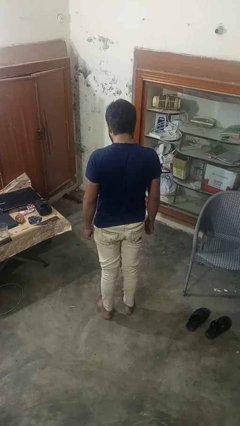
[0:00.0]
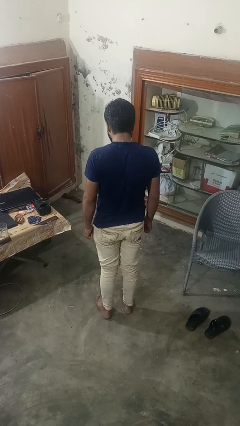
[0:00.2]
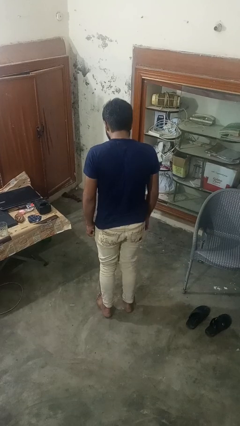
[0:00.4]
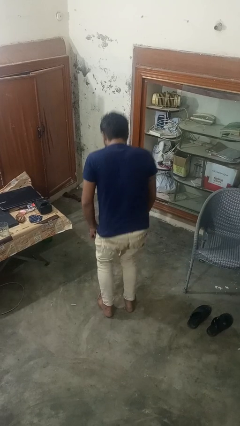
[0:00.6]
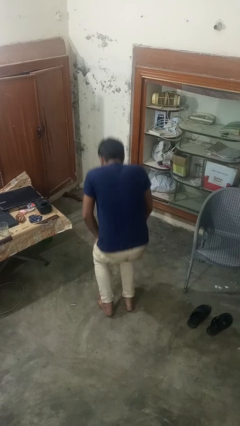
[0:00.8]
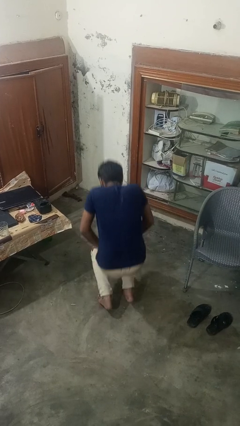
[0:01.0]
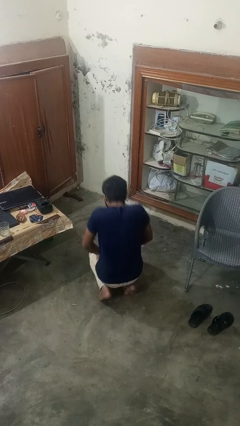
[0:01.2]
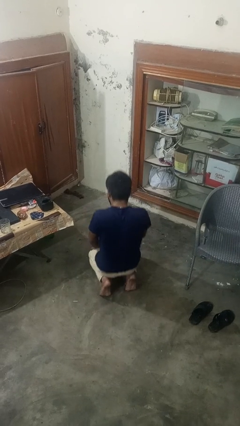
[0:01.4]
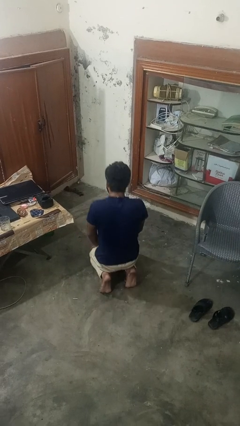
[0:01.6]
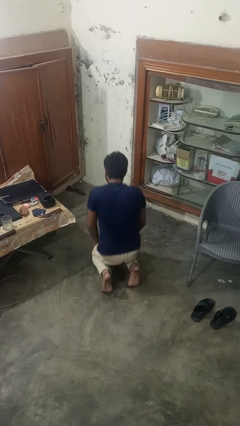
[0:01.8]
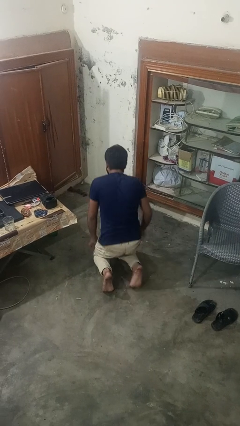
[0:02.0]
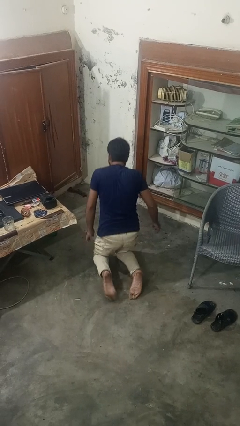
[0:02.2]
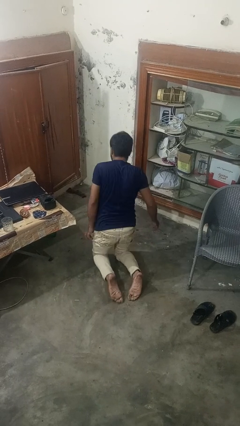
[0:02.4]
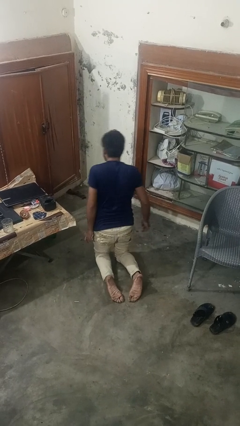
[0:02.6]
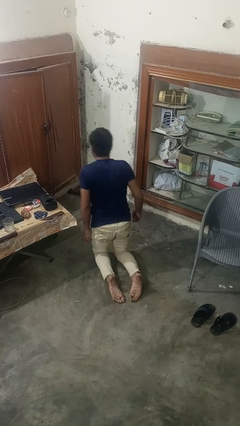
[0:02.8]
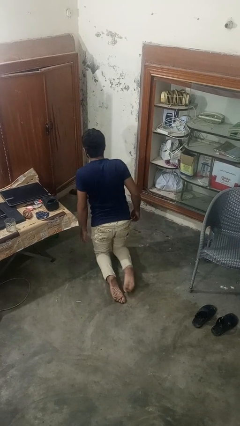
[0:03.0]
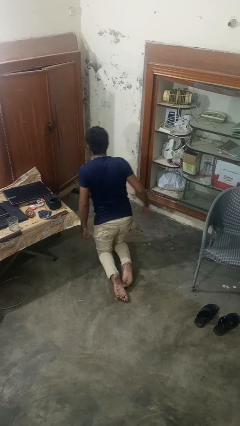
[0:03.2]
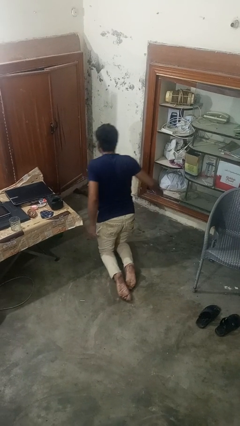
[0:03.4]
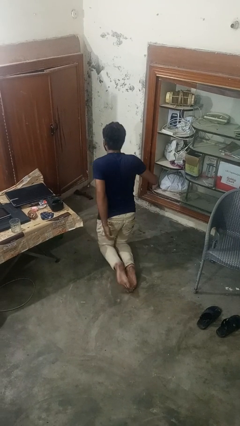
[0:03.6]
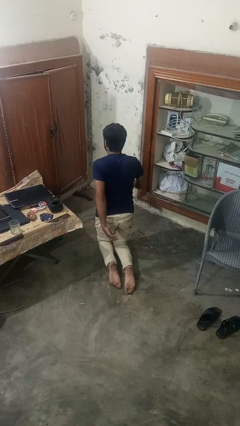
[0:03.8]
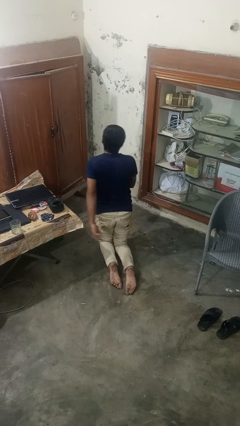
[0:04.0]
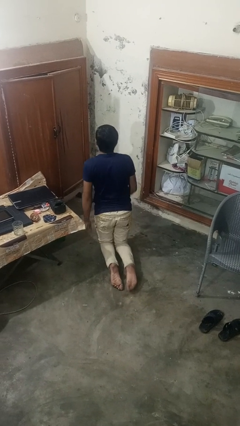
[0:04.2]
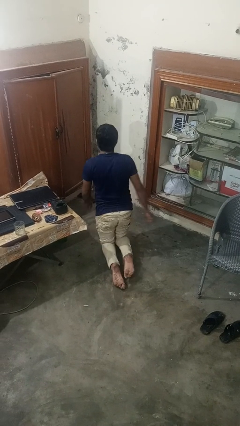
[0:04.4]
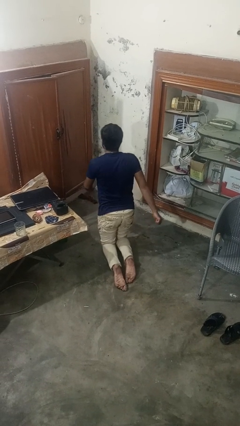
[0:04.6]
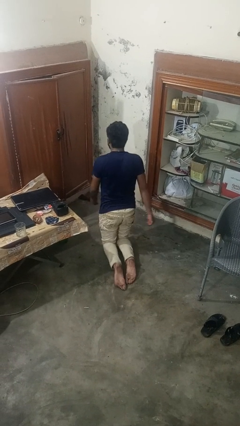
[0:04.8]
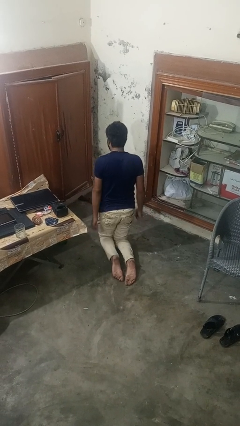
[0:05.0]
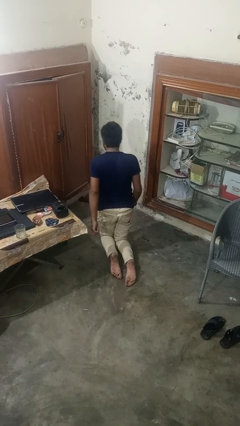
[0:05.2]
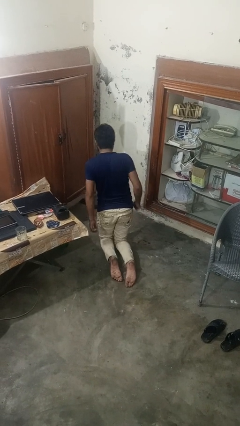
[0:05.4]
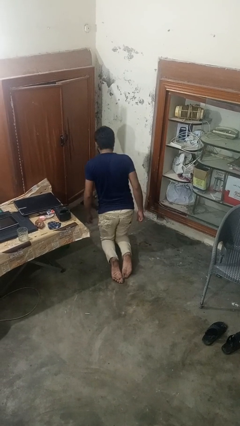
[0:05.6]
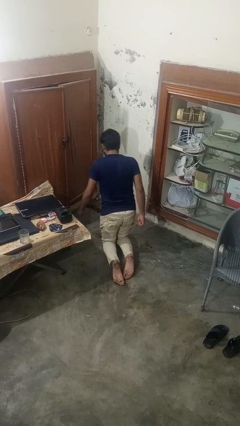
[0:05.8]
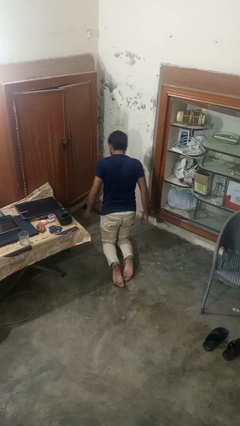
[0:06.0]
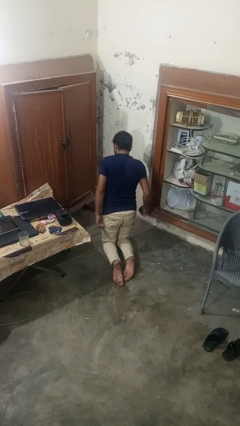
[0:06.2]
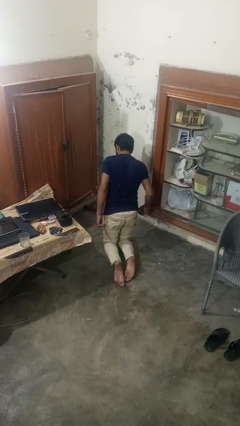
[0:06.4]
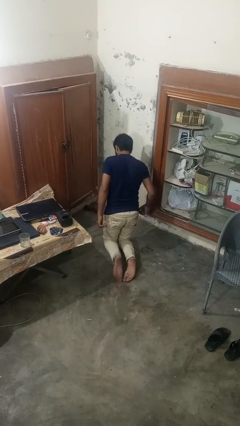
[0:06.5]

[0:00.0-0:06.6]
person exercises with lunges

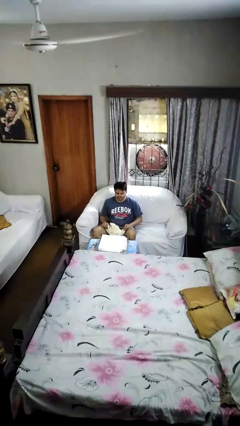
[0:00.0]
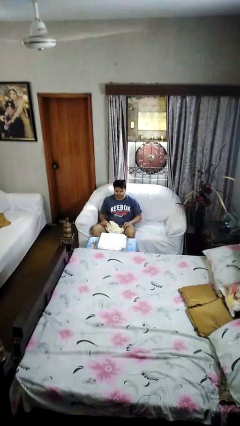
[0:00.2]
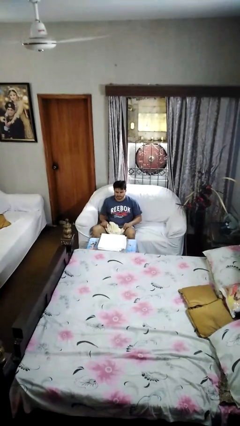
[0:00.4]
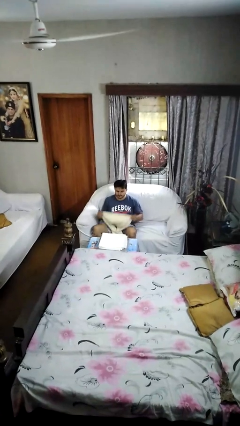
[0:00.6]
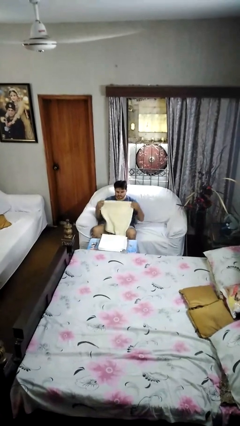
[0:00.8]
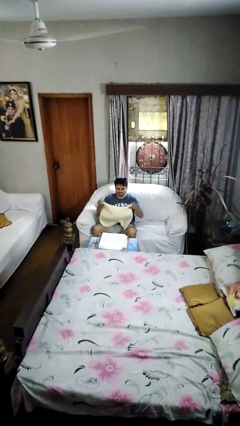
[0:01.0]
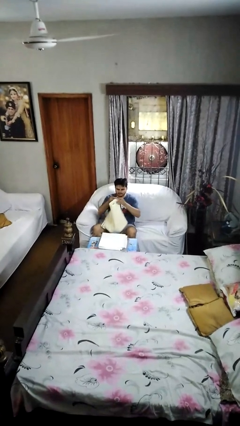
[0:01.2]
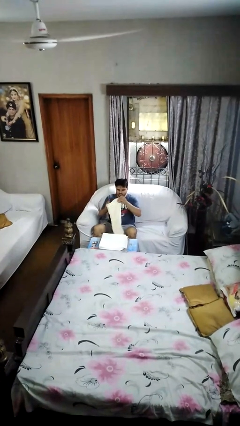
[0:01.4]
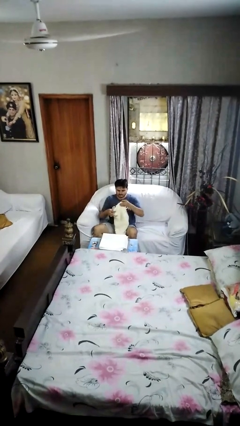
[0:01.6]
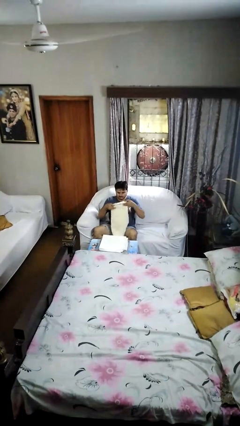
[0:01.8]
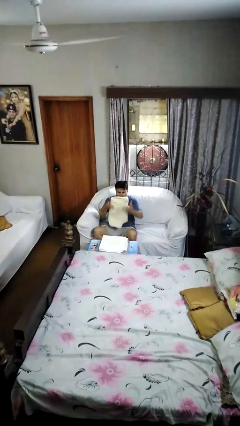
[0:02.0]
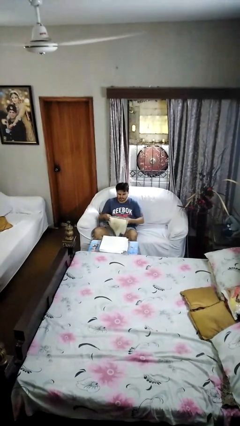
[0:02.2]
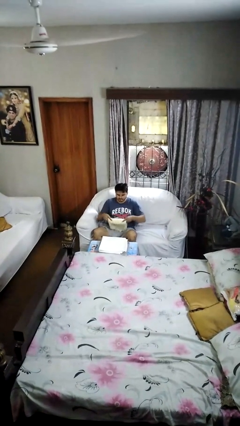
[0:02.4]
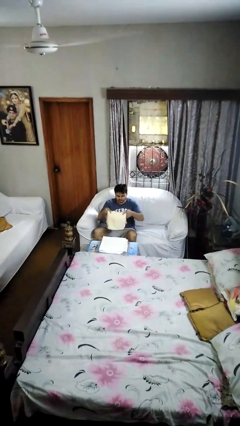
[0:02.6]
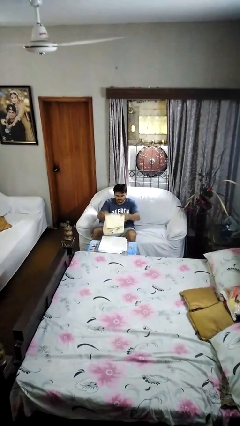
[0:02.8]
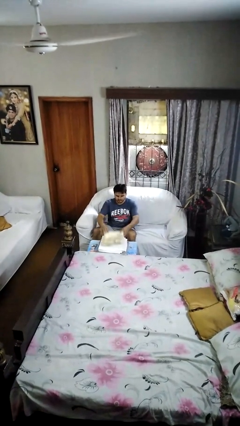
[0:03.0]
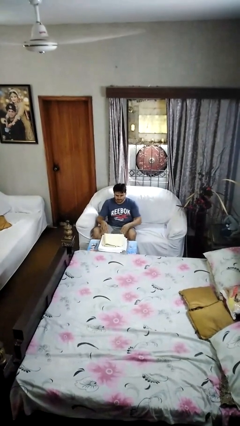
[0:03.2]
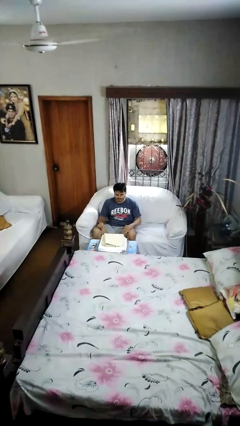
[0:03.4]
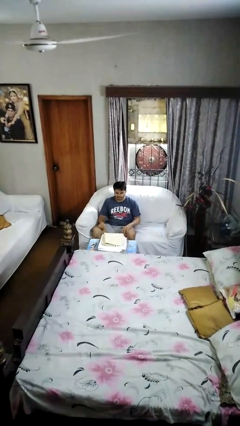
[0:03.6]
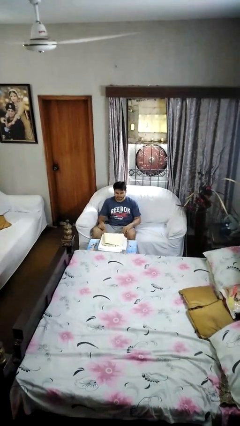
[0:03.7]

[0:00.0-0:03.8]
person folds towel

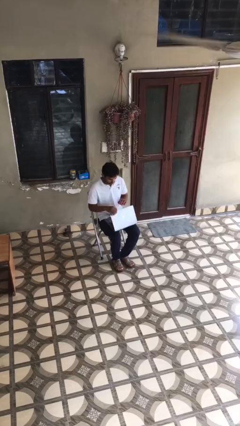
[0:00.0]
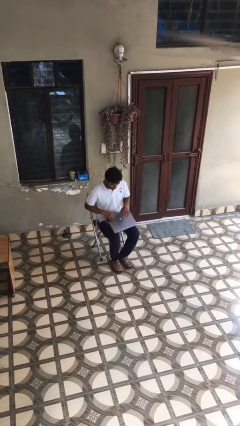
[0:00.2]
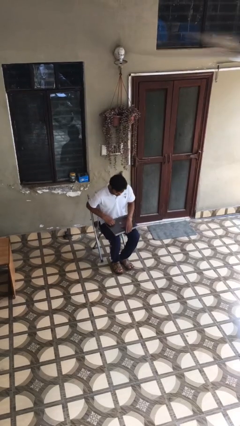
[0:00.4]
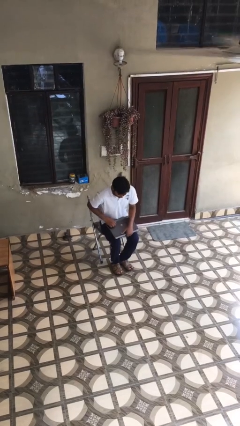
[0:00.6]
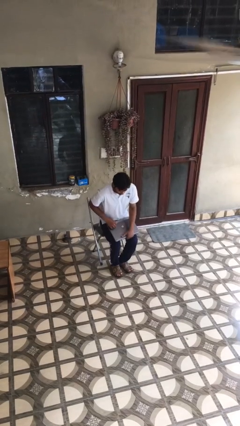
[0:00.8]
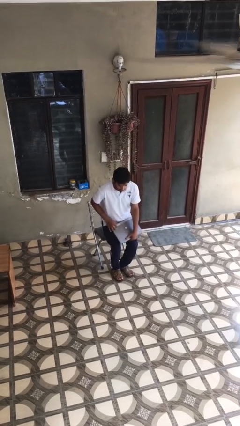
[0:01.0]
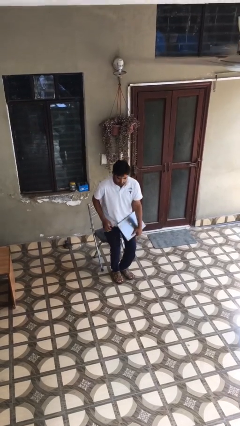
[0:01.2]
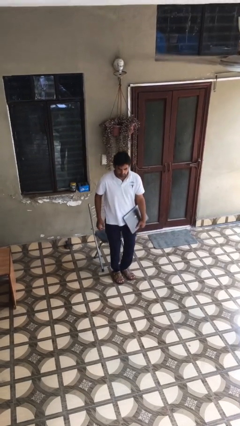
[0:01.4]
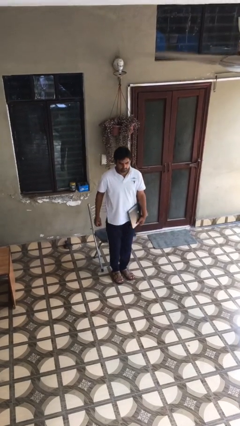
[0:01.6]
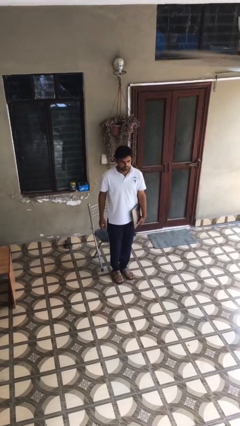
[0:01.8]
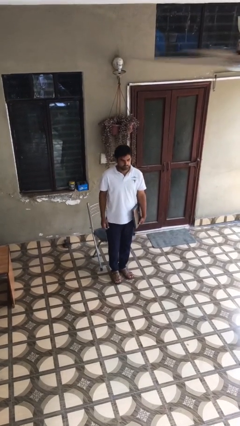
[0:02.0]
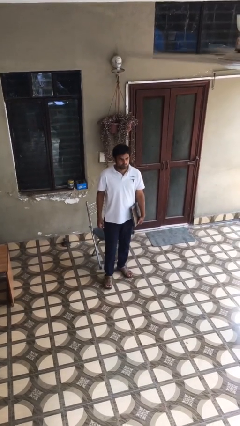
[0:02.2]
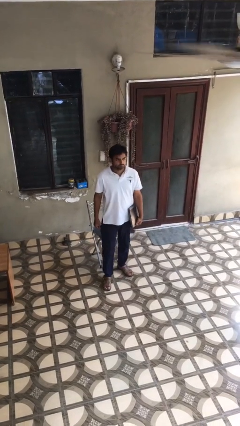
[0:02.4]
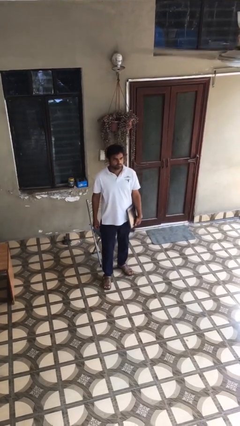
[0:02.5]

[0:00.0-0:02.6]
person stands up

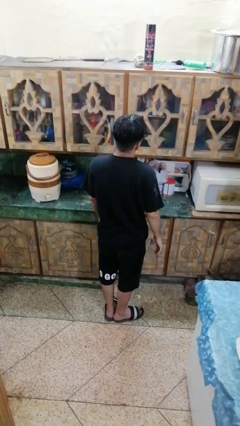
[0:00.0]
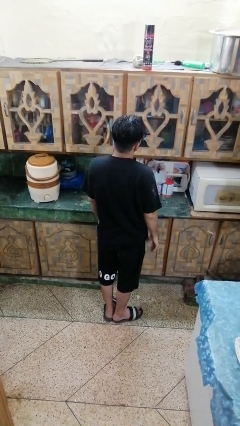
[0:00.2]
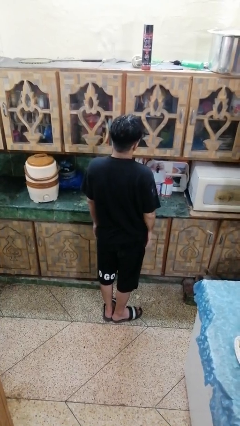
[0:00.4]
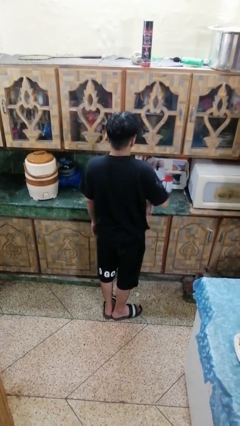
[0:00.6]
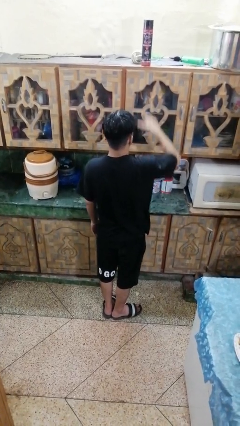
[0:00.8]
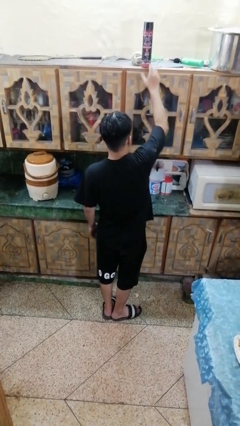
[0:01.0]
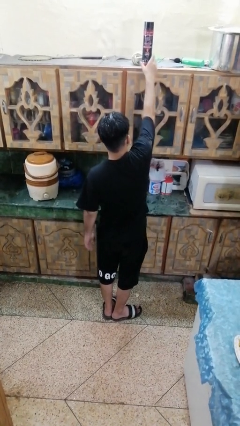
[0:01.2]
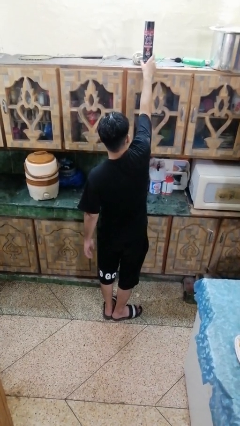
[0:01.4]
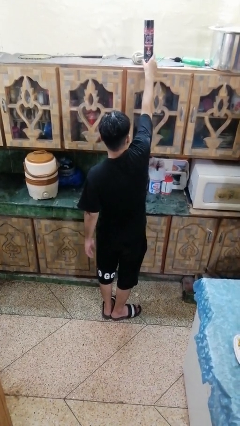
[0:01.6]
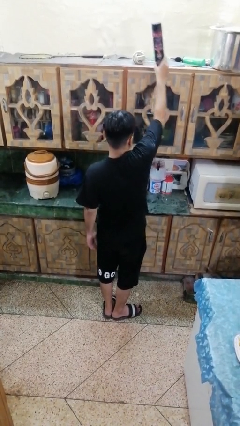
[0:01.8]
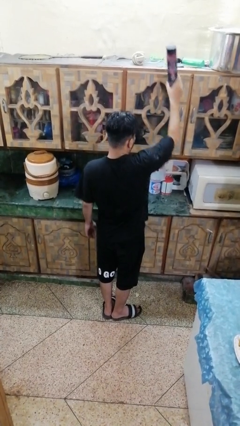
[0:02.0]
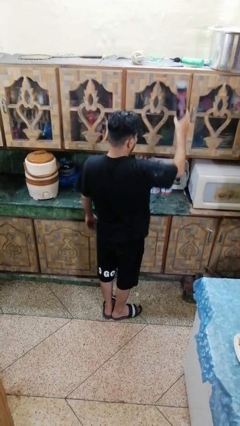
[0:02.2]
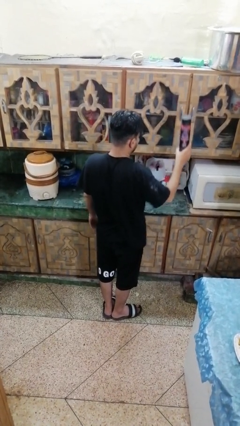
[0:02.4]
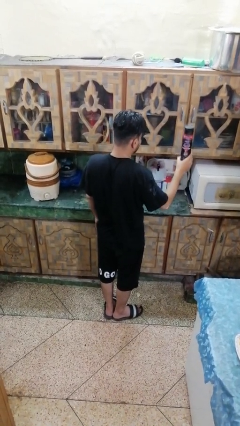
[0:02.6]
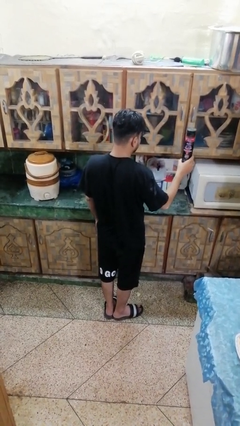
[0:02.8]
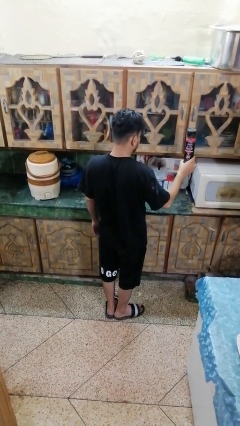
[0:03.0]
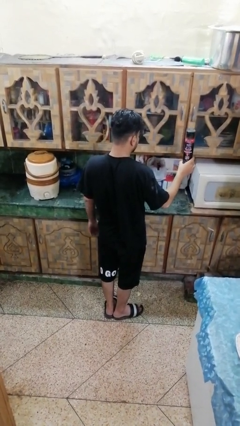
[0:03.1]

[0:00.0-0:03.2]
person picks up object from countertop

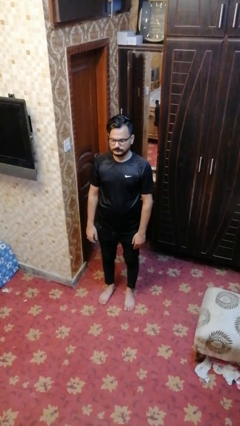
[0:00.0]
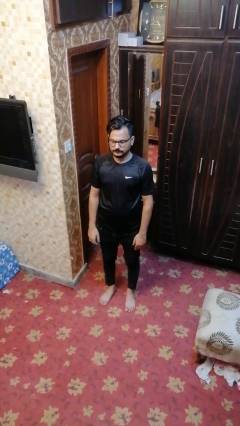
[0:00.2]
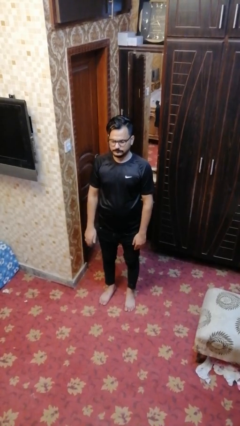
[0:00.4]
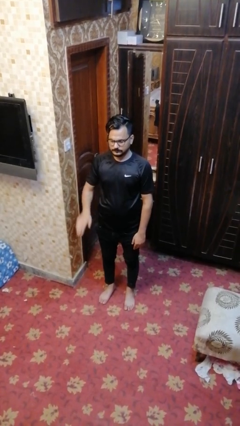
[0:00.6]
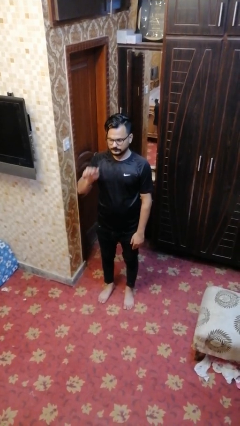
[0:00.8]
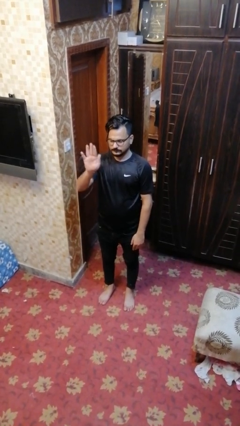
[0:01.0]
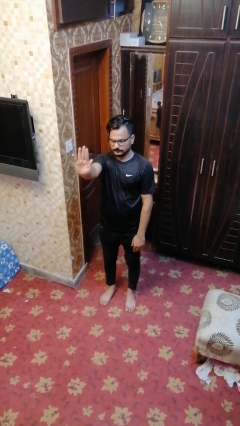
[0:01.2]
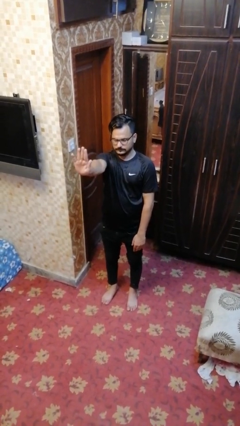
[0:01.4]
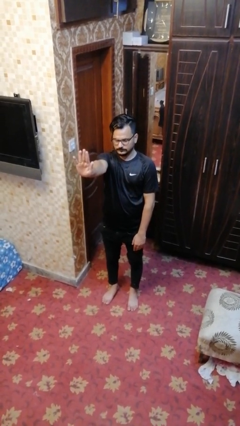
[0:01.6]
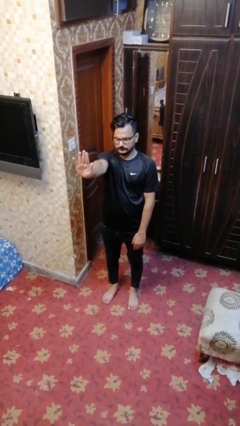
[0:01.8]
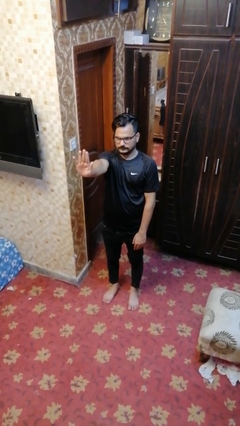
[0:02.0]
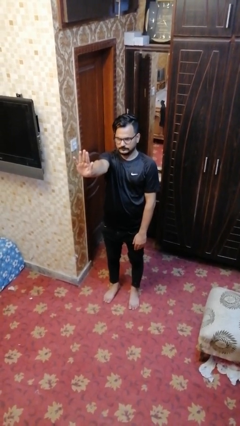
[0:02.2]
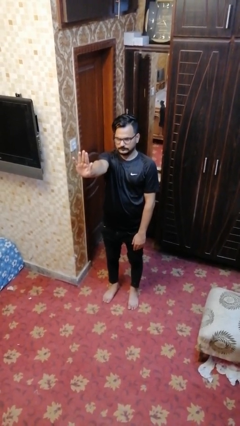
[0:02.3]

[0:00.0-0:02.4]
person gestures stop
